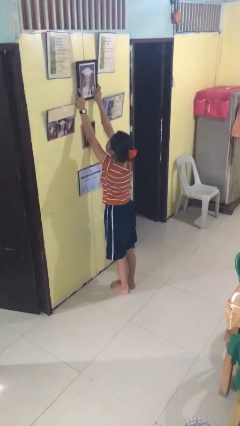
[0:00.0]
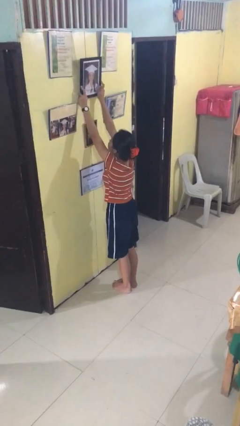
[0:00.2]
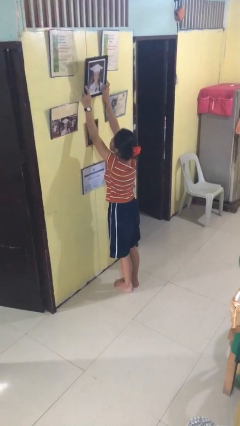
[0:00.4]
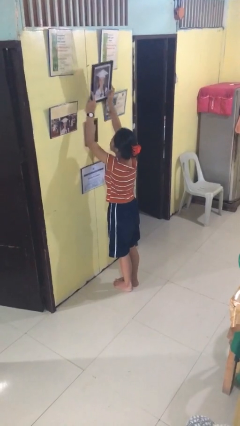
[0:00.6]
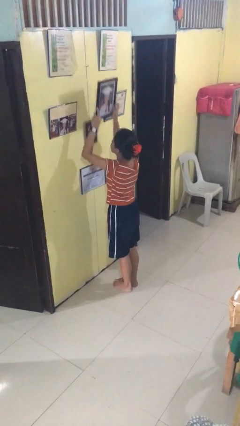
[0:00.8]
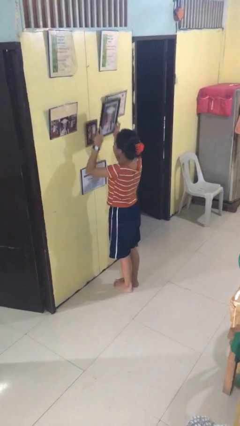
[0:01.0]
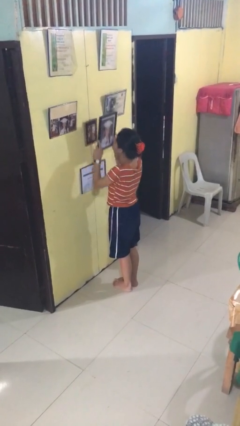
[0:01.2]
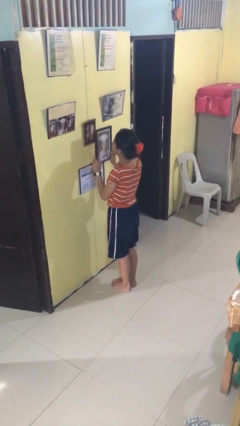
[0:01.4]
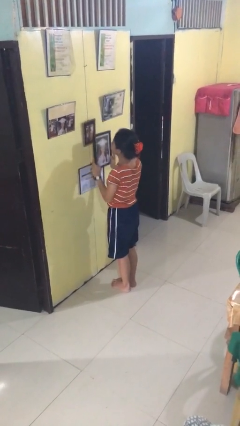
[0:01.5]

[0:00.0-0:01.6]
person takes down picture frame

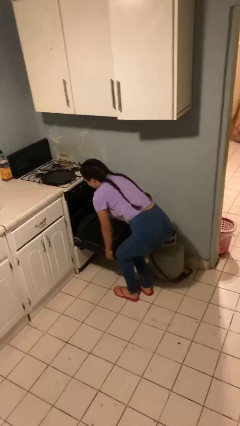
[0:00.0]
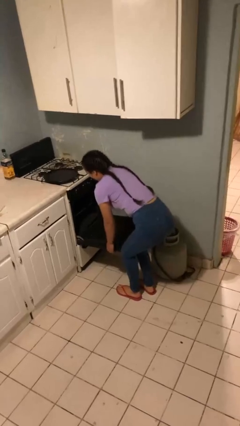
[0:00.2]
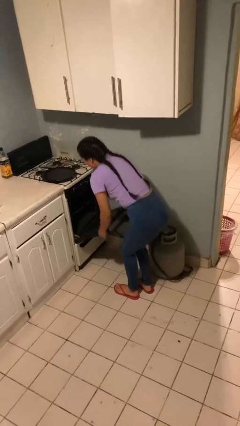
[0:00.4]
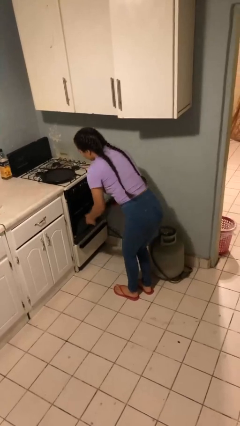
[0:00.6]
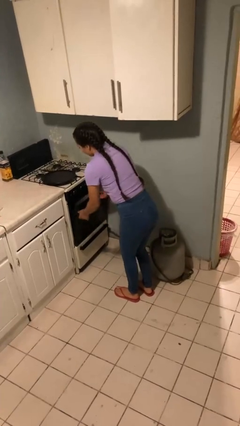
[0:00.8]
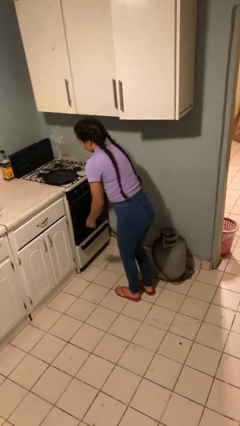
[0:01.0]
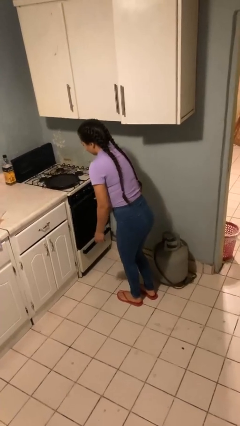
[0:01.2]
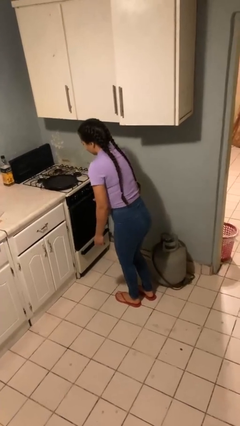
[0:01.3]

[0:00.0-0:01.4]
person closes oven door

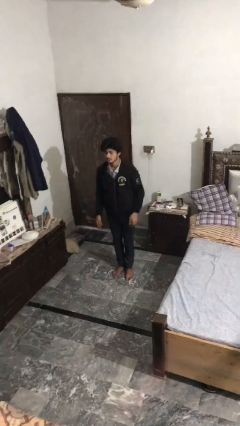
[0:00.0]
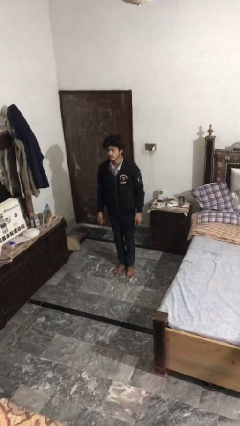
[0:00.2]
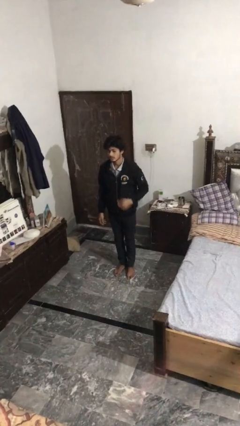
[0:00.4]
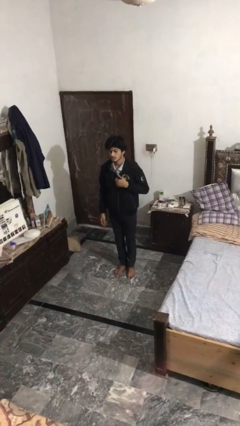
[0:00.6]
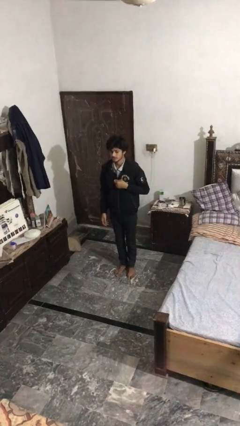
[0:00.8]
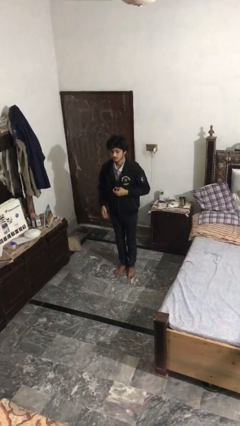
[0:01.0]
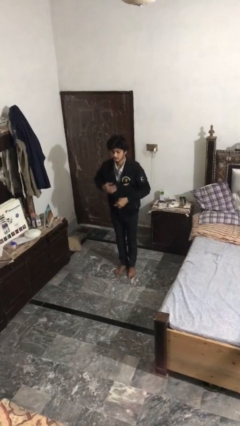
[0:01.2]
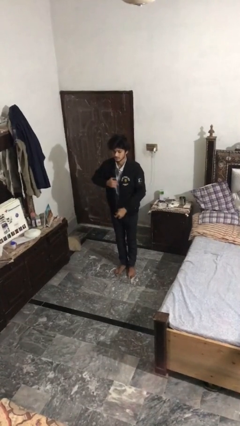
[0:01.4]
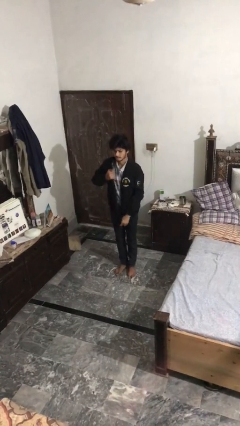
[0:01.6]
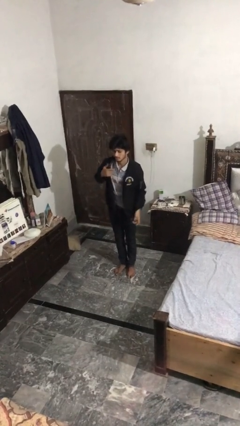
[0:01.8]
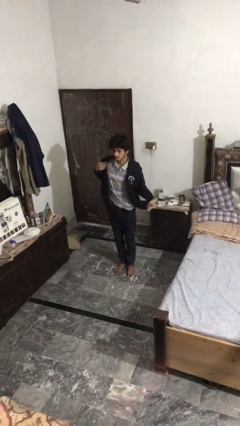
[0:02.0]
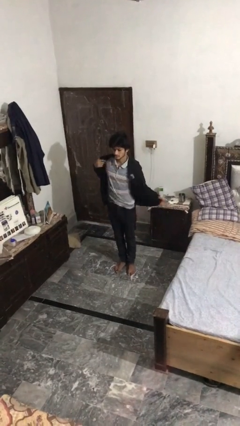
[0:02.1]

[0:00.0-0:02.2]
person unzips jacket

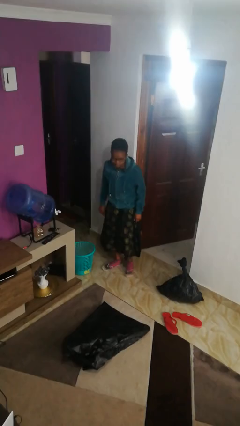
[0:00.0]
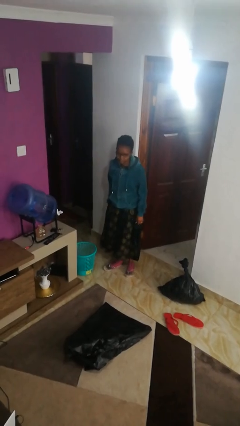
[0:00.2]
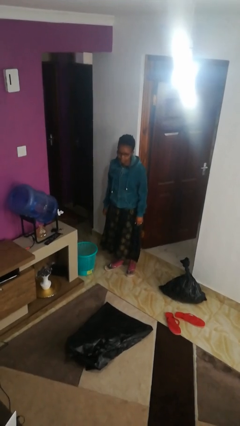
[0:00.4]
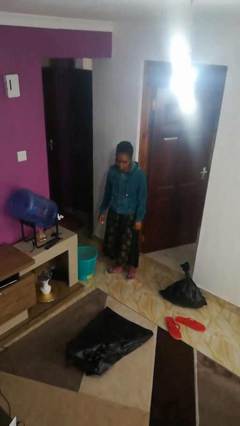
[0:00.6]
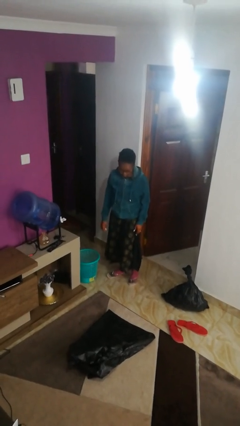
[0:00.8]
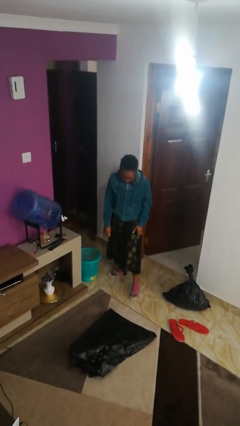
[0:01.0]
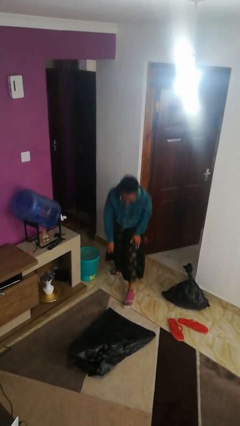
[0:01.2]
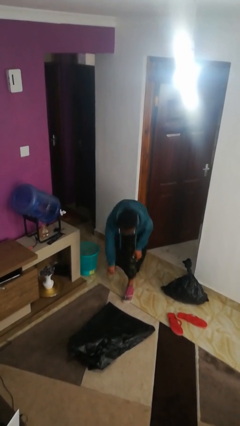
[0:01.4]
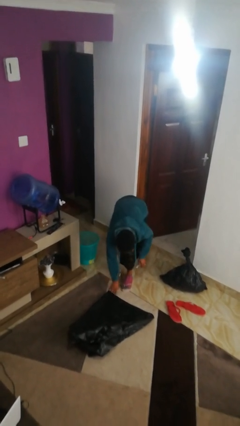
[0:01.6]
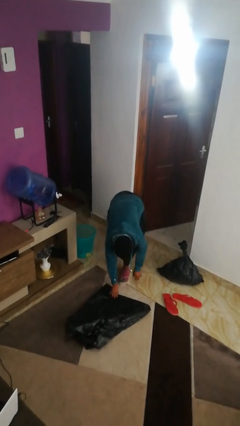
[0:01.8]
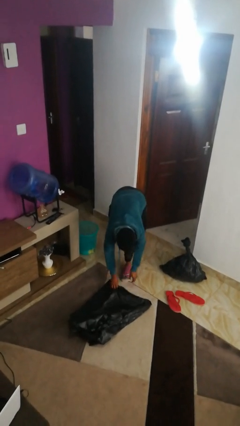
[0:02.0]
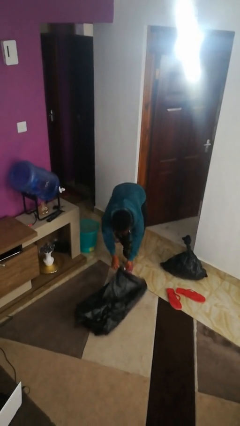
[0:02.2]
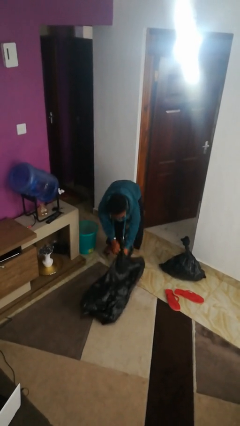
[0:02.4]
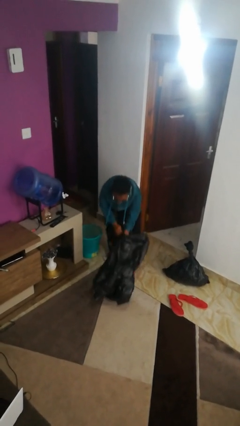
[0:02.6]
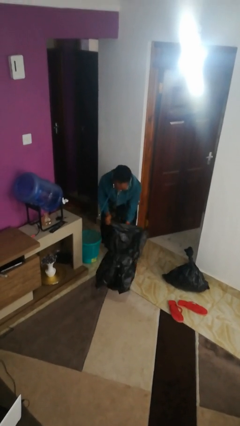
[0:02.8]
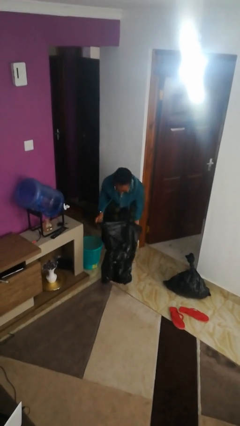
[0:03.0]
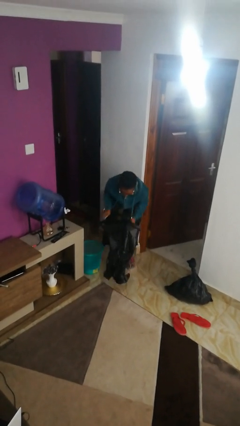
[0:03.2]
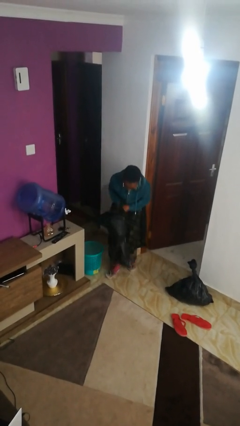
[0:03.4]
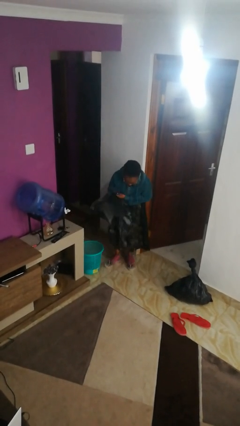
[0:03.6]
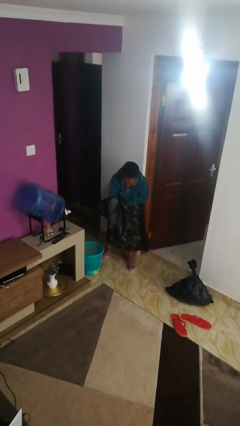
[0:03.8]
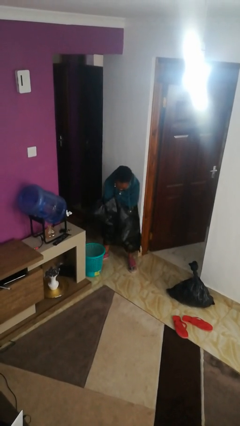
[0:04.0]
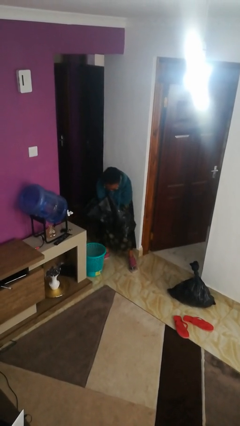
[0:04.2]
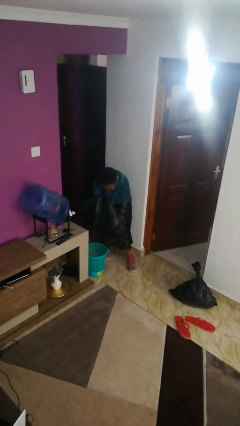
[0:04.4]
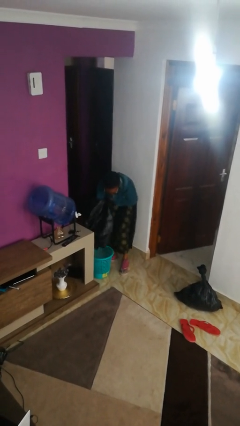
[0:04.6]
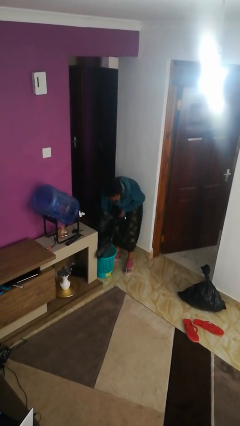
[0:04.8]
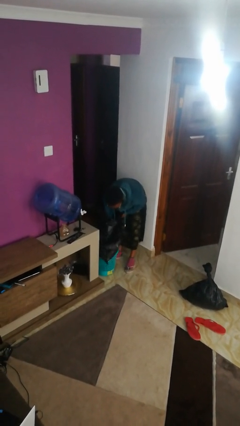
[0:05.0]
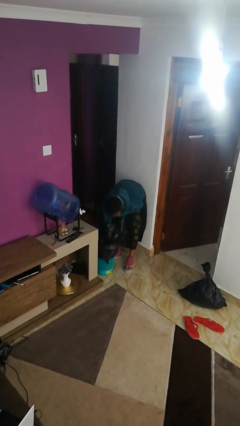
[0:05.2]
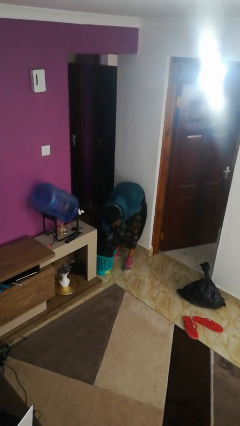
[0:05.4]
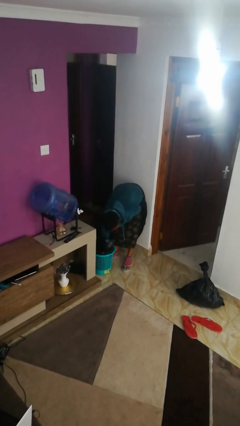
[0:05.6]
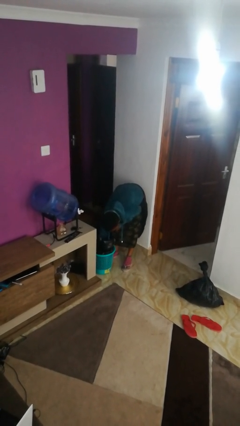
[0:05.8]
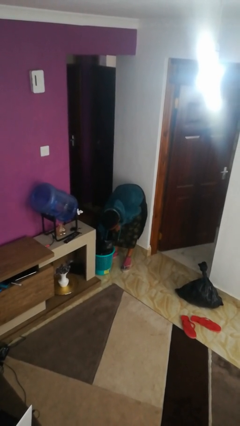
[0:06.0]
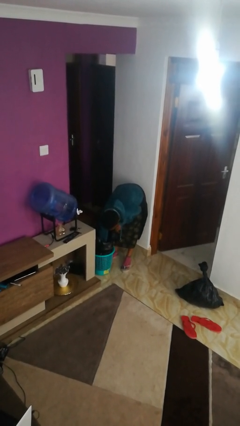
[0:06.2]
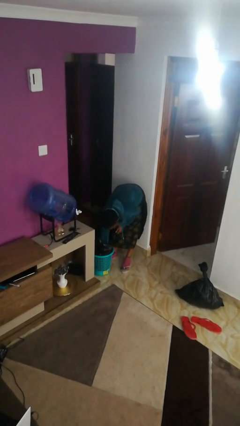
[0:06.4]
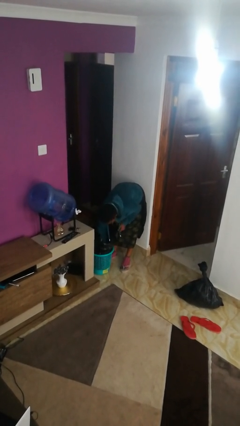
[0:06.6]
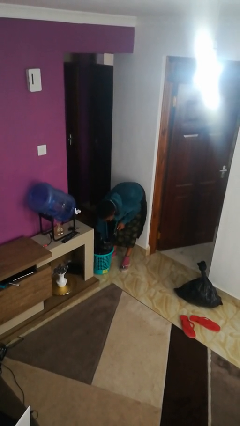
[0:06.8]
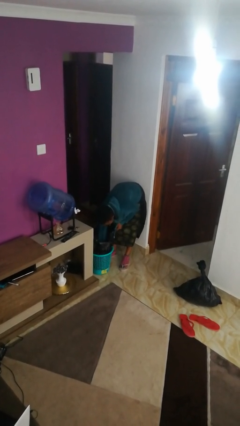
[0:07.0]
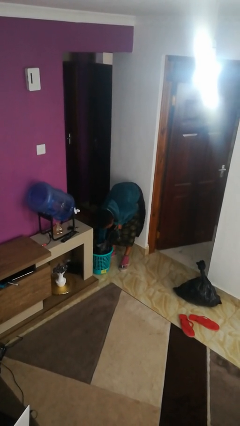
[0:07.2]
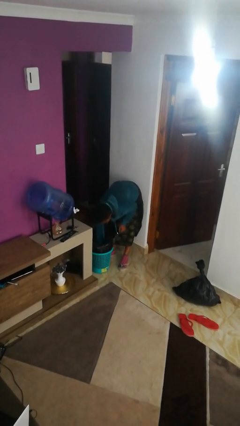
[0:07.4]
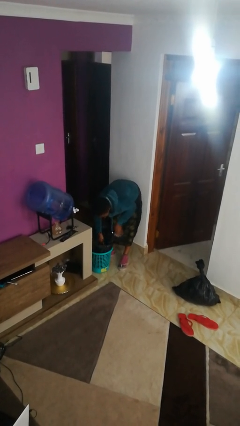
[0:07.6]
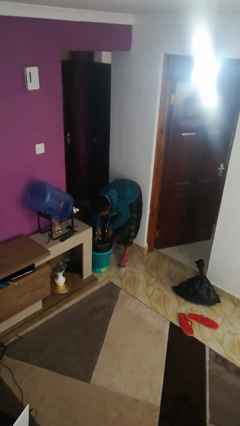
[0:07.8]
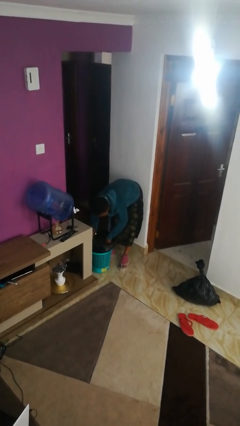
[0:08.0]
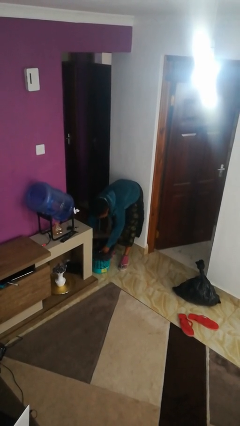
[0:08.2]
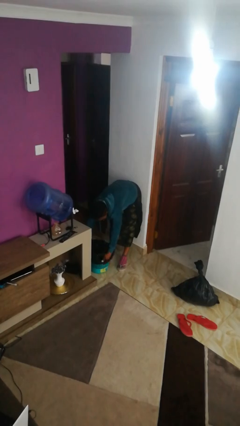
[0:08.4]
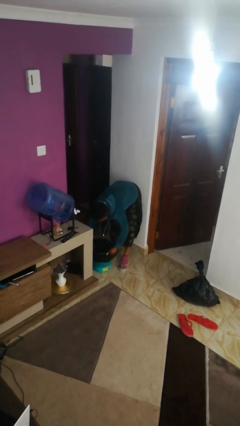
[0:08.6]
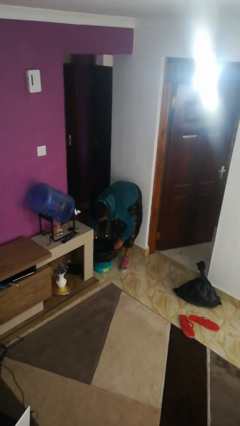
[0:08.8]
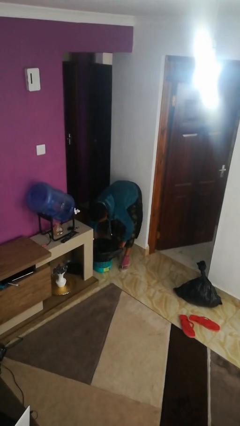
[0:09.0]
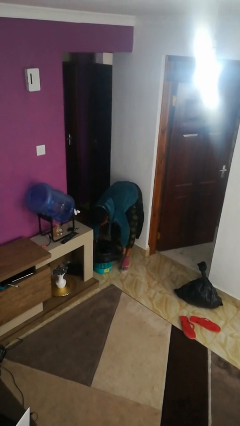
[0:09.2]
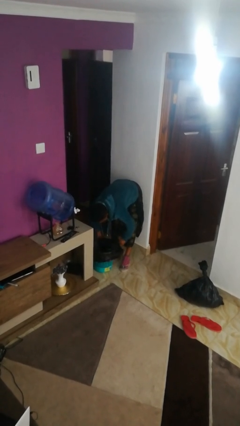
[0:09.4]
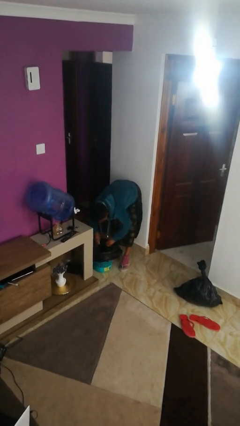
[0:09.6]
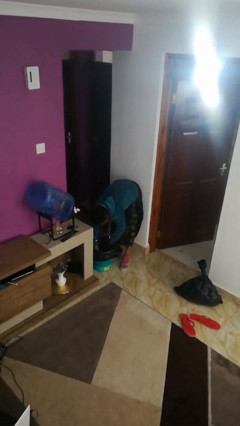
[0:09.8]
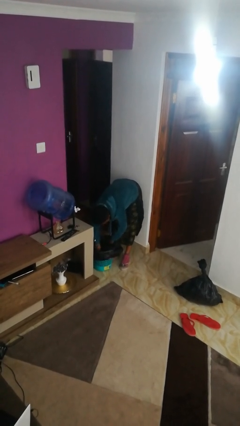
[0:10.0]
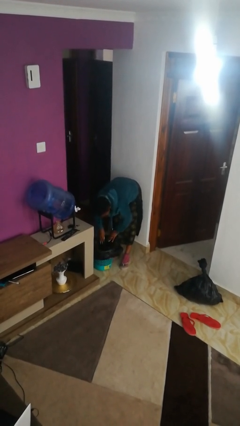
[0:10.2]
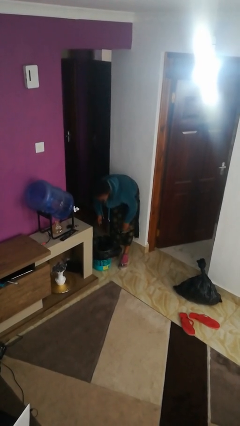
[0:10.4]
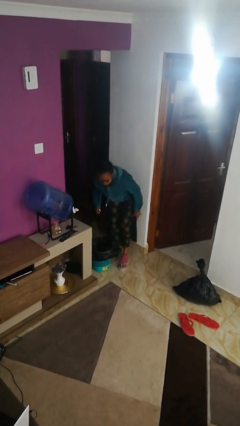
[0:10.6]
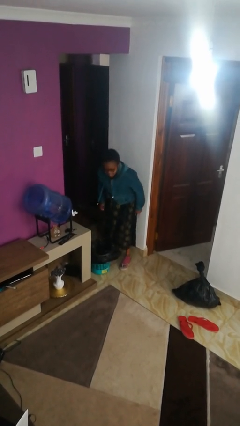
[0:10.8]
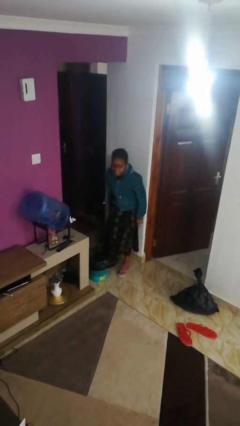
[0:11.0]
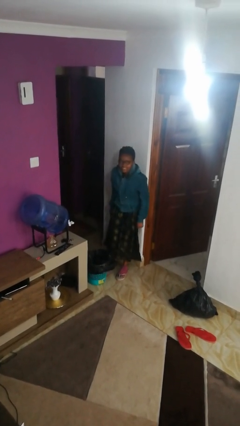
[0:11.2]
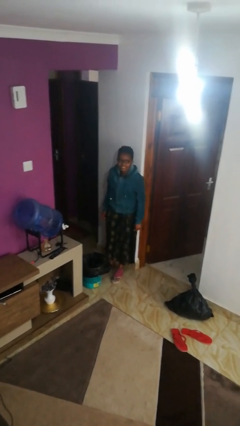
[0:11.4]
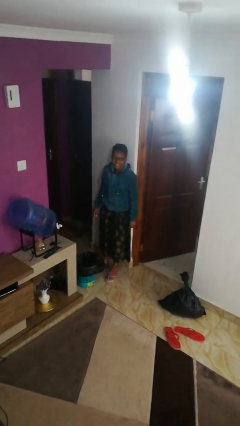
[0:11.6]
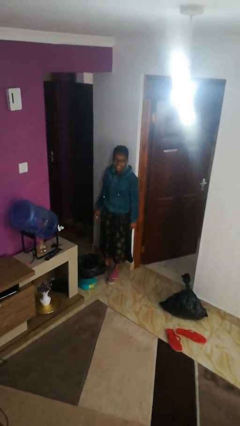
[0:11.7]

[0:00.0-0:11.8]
person inserts trashbag into trashcan

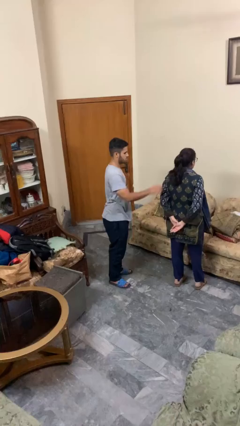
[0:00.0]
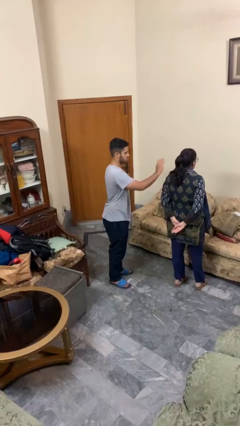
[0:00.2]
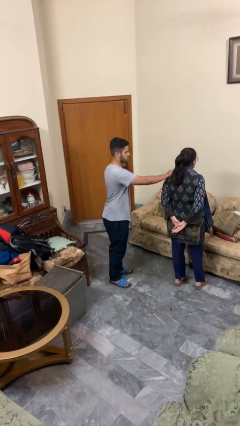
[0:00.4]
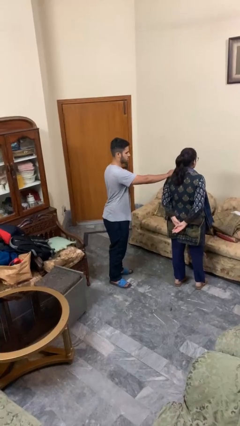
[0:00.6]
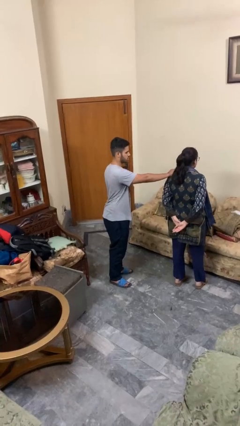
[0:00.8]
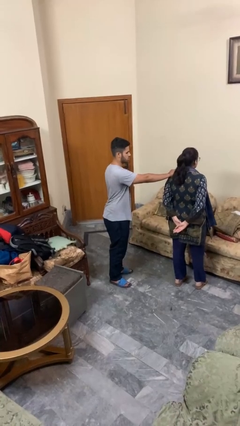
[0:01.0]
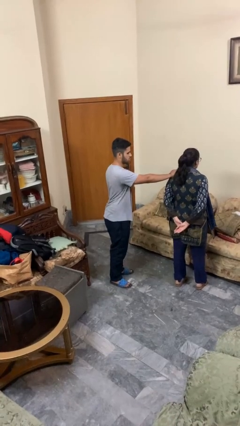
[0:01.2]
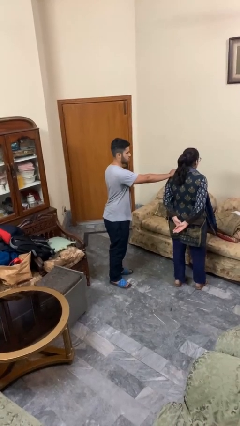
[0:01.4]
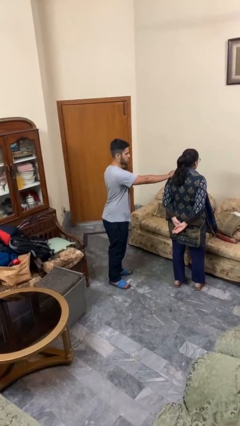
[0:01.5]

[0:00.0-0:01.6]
person grabs person by shoulder
